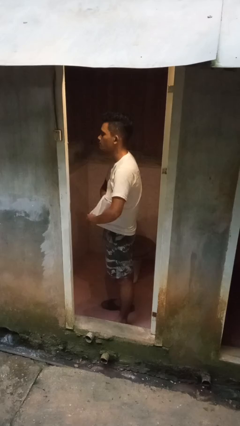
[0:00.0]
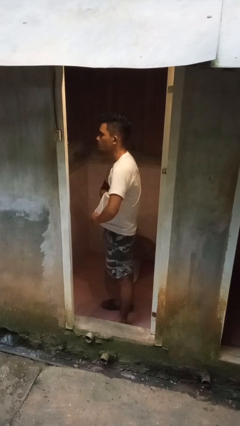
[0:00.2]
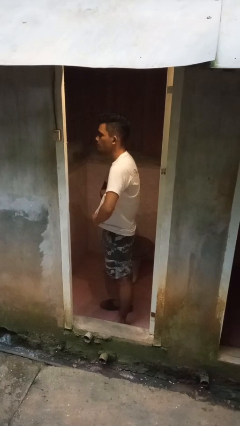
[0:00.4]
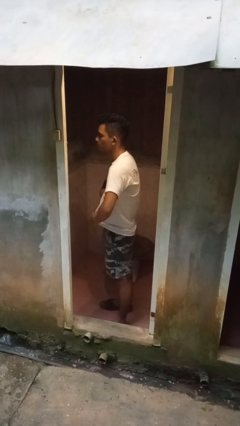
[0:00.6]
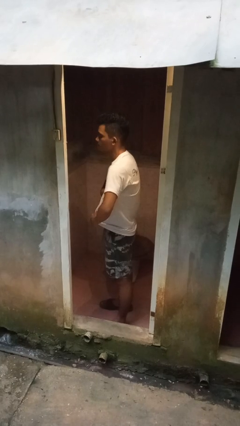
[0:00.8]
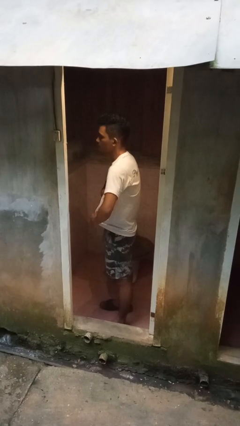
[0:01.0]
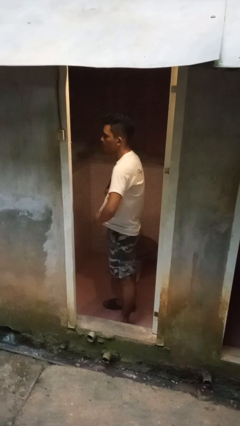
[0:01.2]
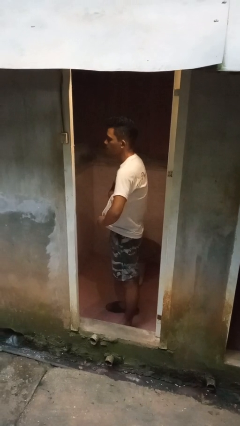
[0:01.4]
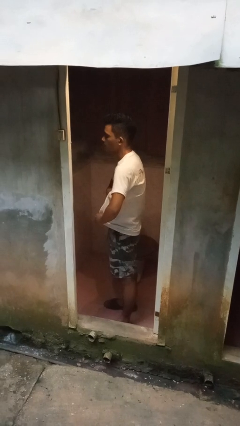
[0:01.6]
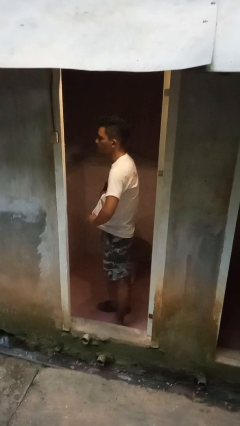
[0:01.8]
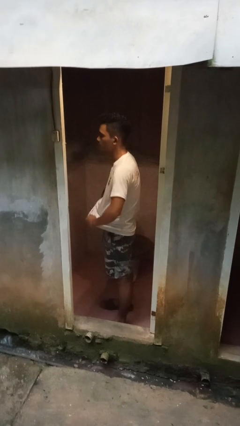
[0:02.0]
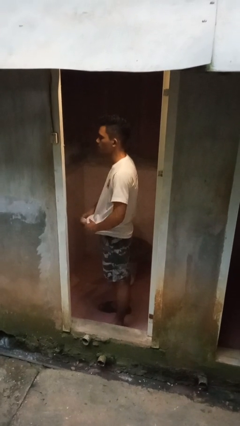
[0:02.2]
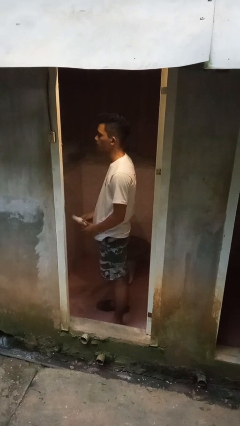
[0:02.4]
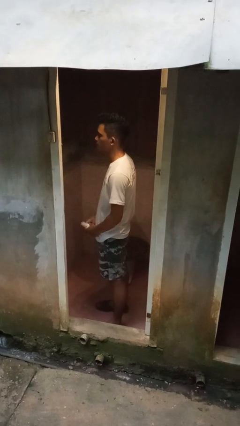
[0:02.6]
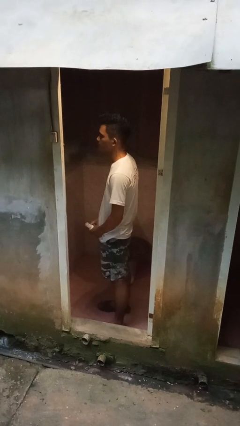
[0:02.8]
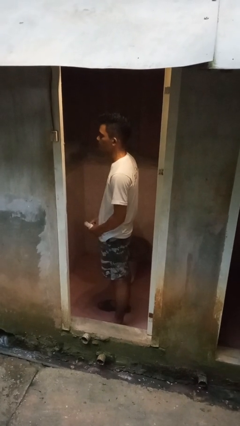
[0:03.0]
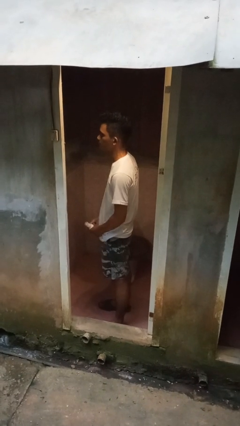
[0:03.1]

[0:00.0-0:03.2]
person applies deodorant

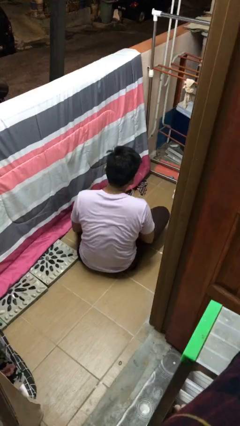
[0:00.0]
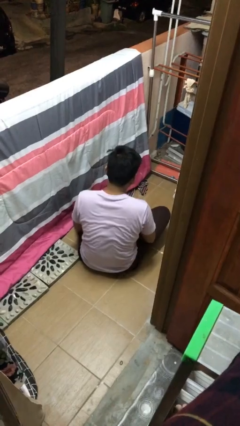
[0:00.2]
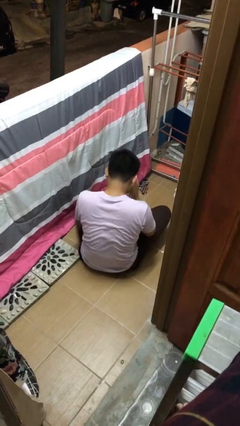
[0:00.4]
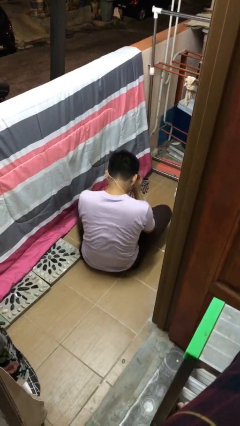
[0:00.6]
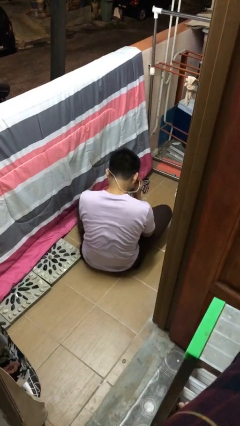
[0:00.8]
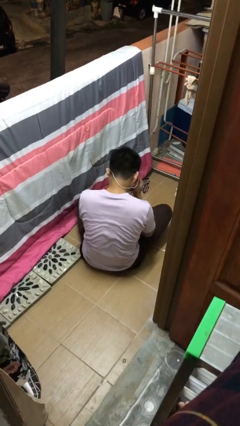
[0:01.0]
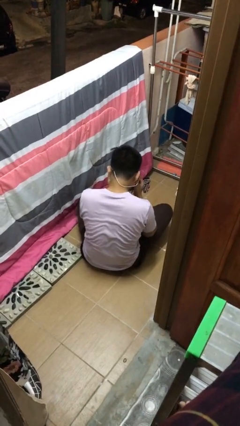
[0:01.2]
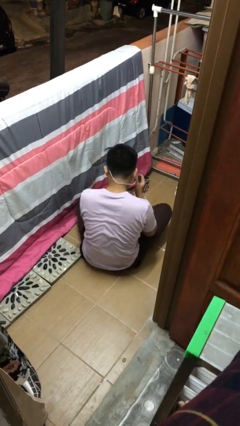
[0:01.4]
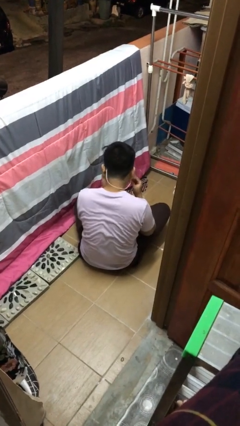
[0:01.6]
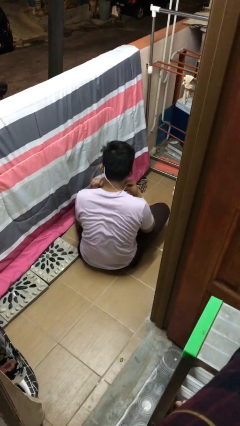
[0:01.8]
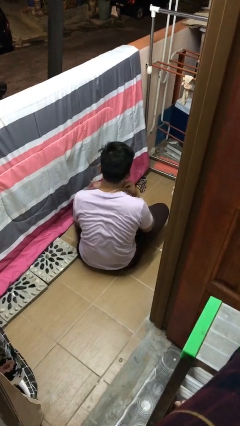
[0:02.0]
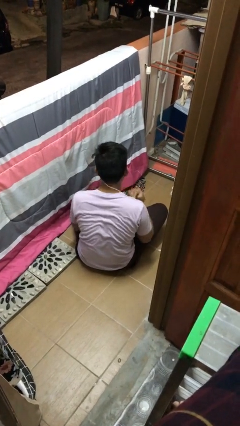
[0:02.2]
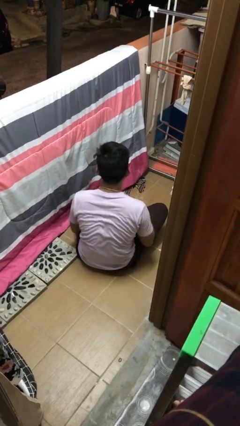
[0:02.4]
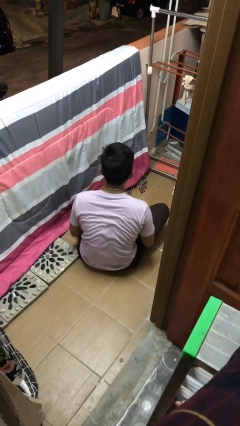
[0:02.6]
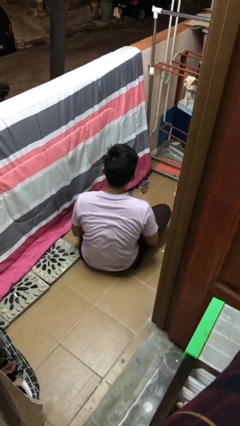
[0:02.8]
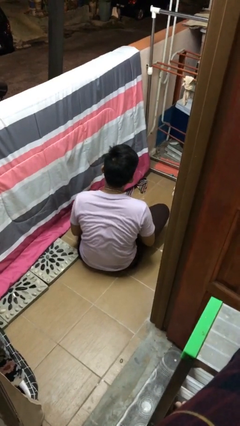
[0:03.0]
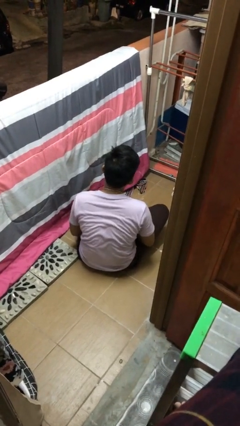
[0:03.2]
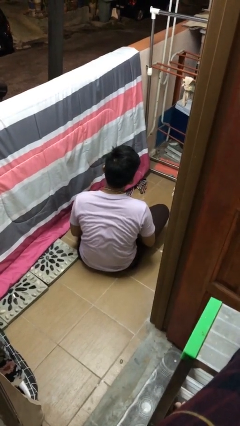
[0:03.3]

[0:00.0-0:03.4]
person puts on necklace

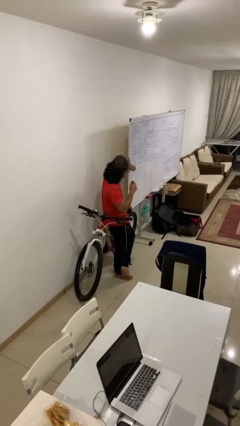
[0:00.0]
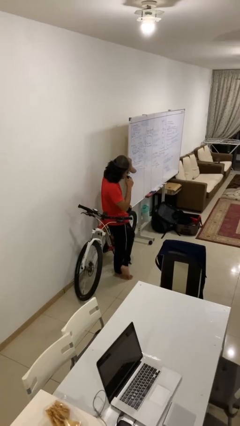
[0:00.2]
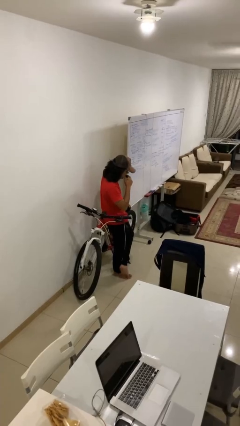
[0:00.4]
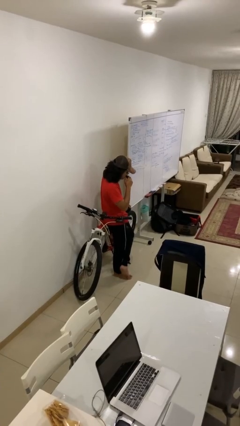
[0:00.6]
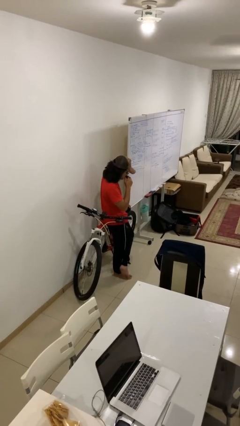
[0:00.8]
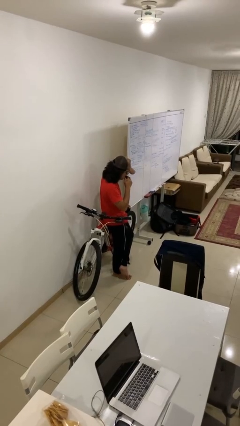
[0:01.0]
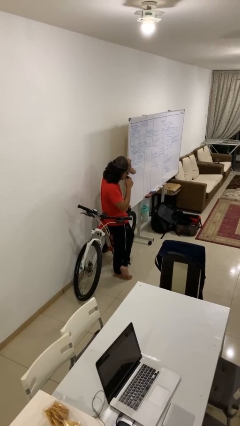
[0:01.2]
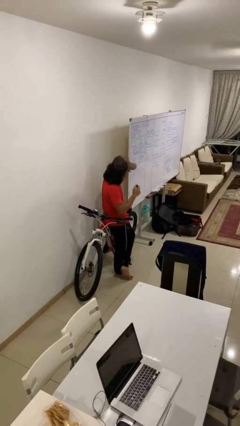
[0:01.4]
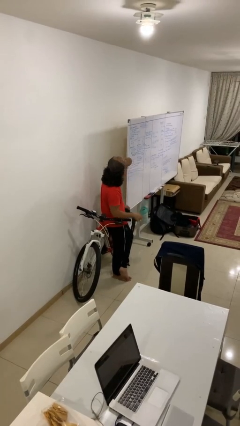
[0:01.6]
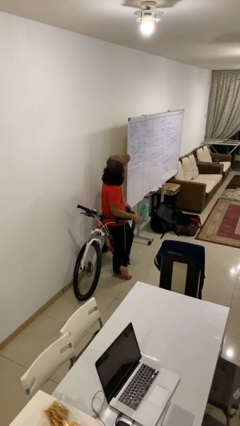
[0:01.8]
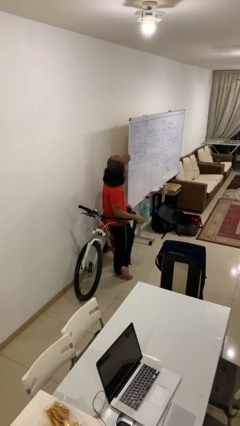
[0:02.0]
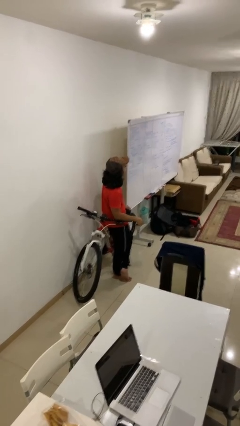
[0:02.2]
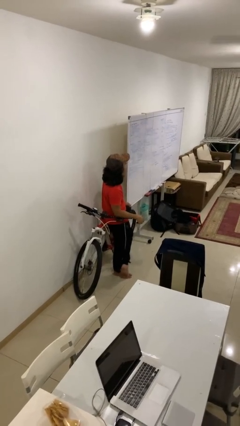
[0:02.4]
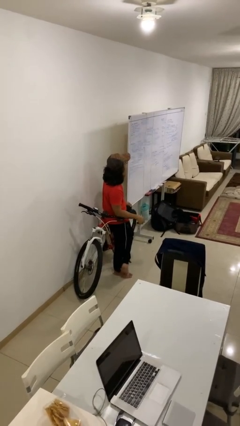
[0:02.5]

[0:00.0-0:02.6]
person vapes

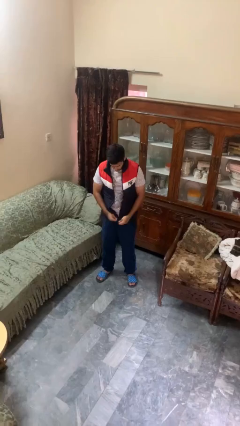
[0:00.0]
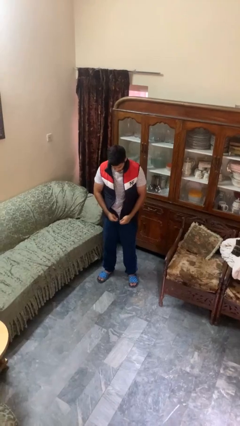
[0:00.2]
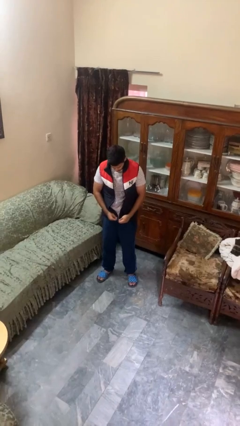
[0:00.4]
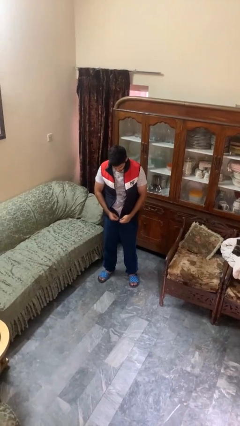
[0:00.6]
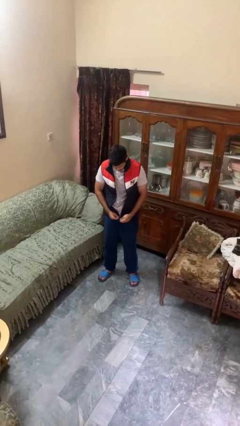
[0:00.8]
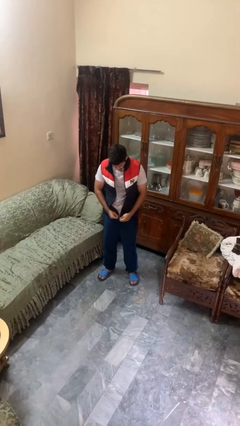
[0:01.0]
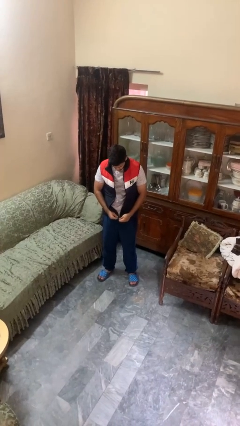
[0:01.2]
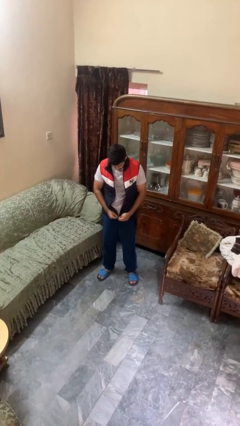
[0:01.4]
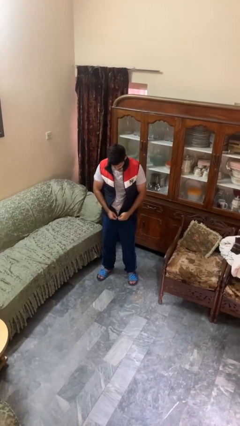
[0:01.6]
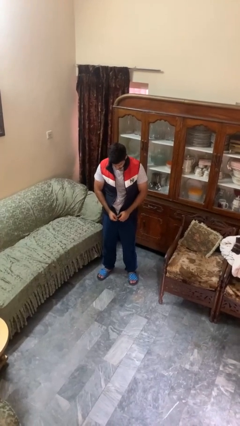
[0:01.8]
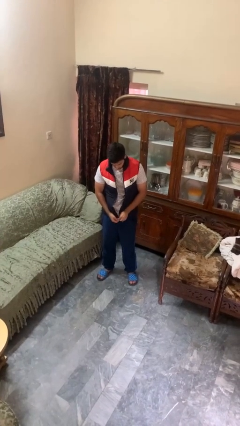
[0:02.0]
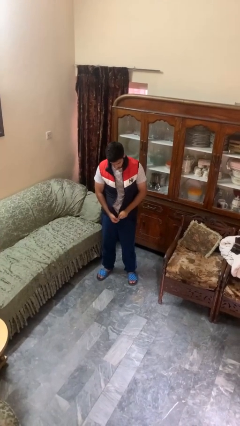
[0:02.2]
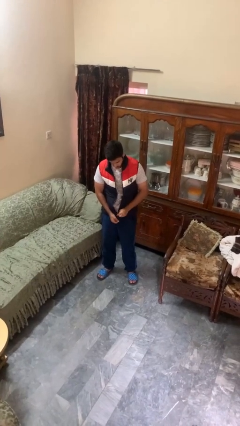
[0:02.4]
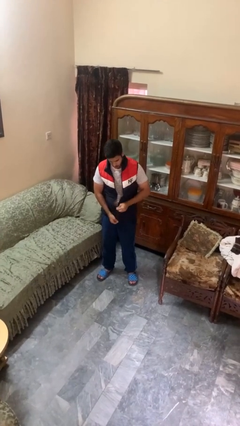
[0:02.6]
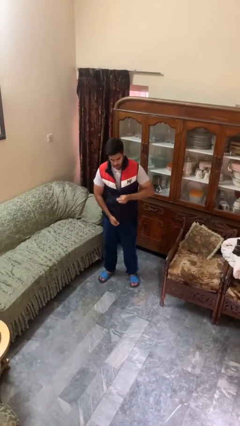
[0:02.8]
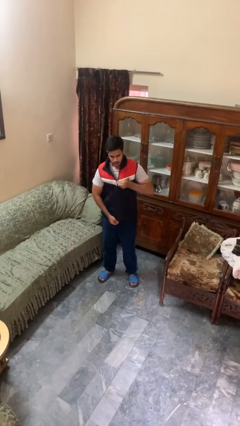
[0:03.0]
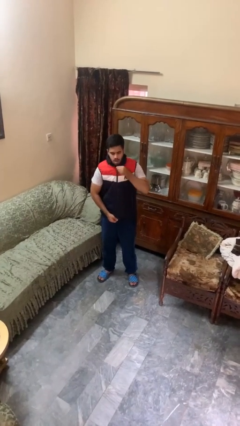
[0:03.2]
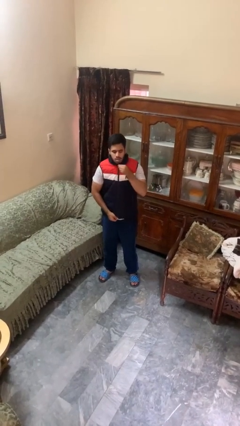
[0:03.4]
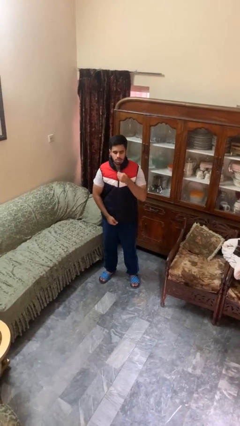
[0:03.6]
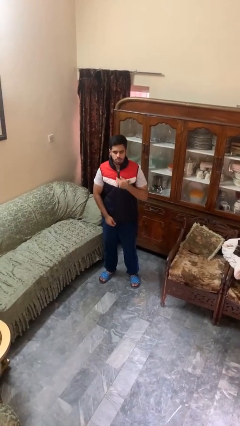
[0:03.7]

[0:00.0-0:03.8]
person zips up jacket

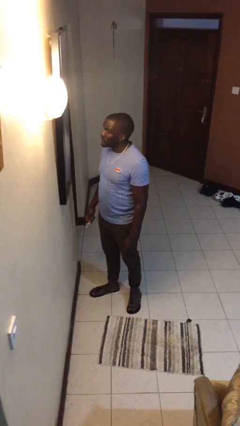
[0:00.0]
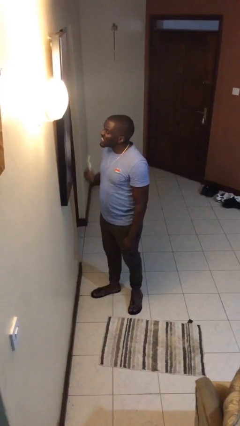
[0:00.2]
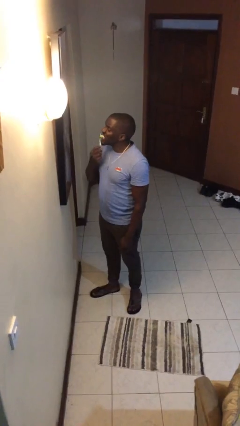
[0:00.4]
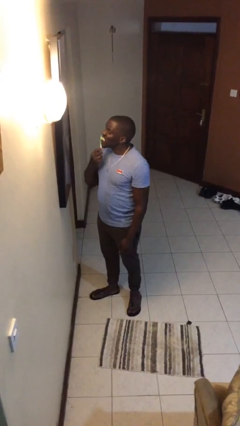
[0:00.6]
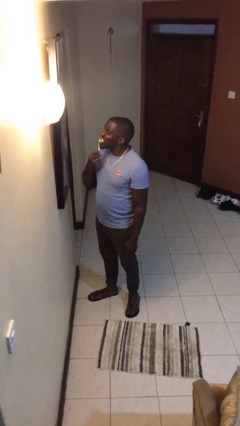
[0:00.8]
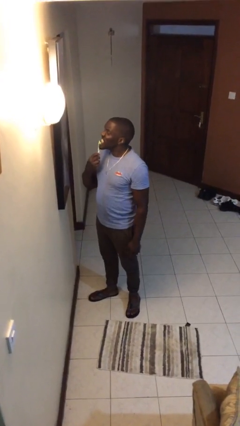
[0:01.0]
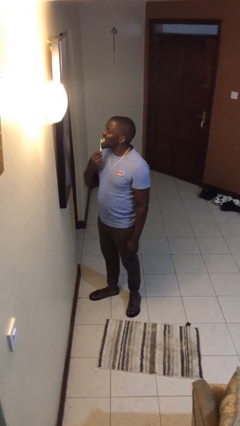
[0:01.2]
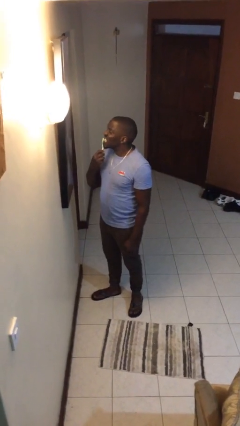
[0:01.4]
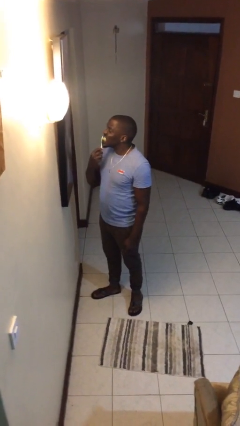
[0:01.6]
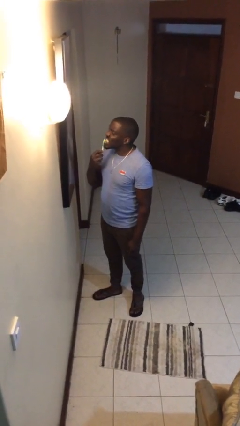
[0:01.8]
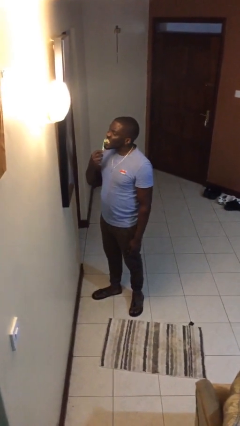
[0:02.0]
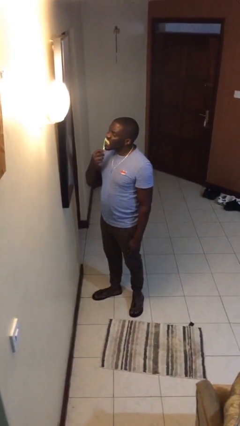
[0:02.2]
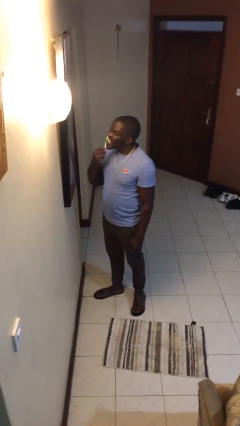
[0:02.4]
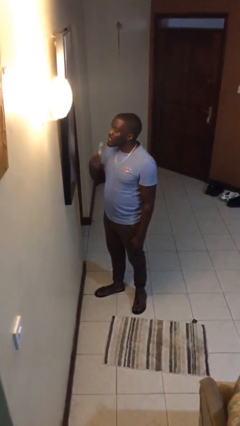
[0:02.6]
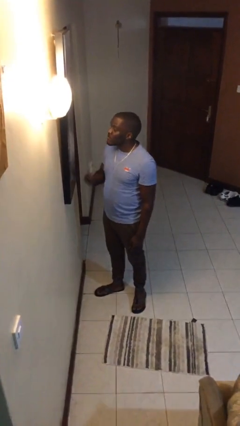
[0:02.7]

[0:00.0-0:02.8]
person brushes teeth

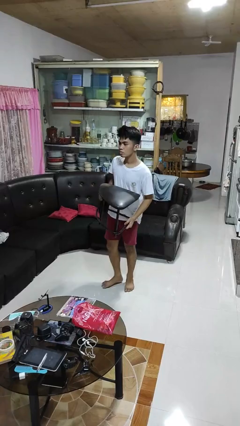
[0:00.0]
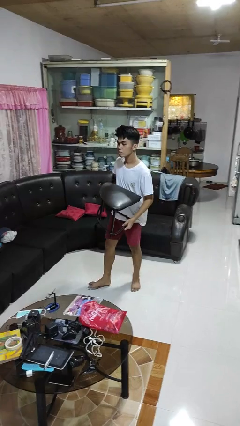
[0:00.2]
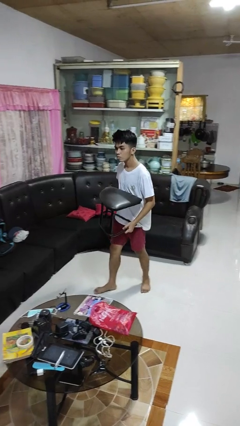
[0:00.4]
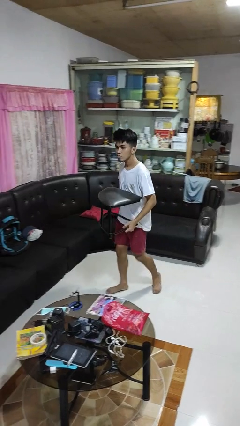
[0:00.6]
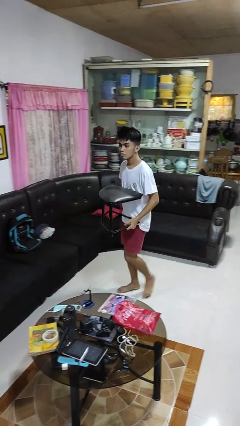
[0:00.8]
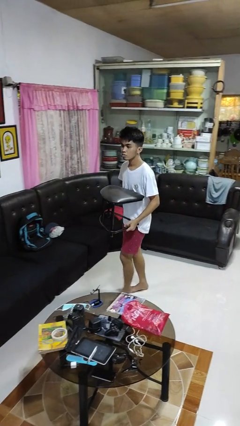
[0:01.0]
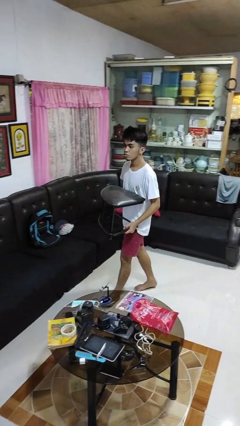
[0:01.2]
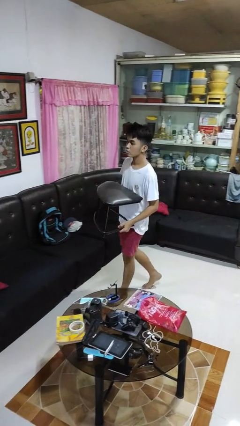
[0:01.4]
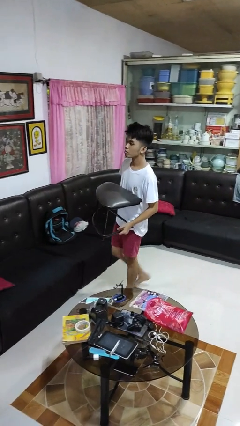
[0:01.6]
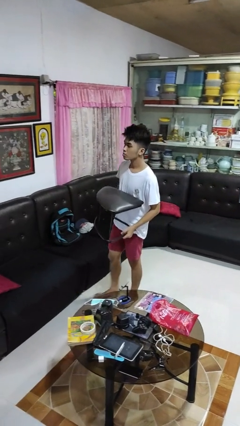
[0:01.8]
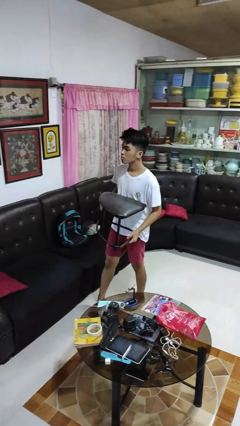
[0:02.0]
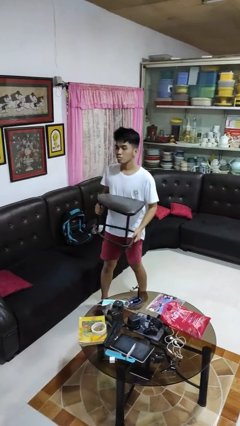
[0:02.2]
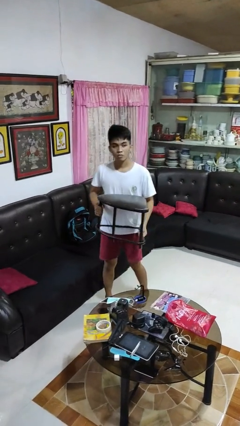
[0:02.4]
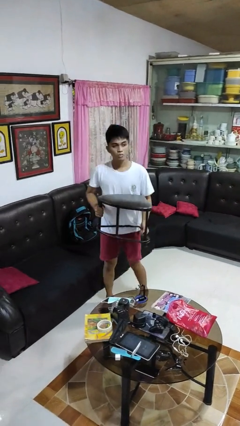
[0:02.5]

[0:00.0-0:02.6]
person carries furniture
